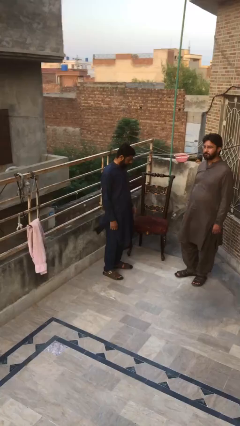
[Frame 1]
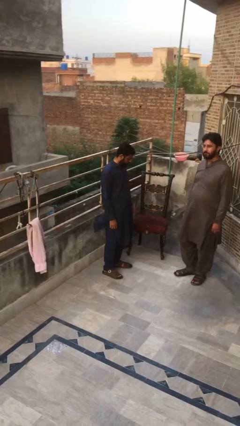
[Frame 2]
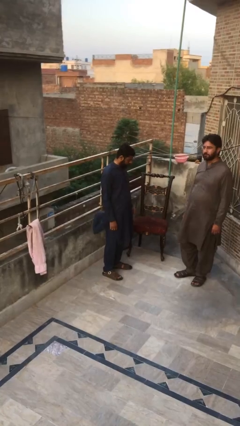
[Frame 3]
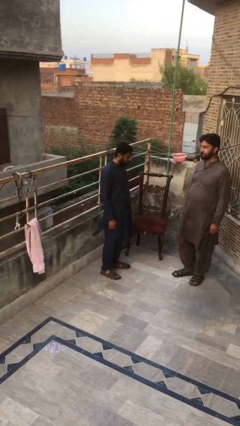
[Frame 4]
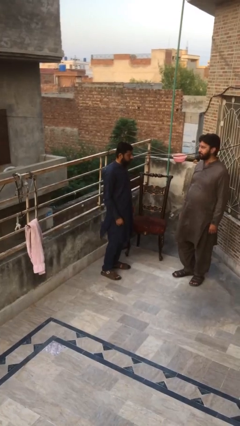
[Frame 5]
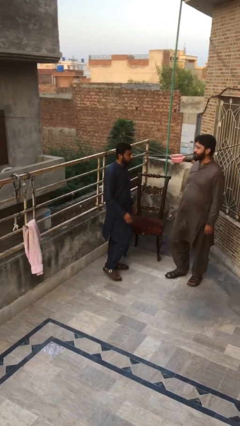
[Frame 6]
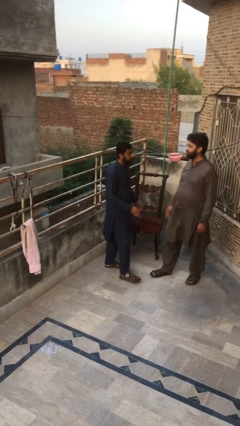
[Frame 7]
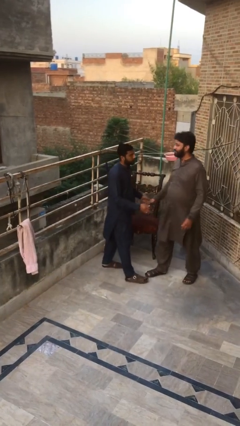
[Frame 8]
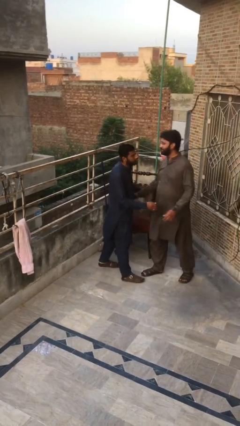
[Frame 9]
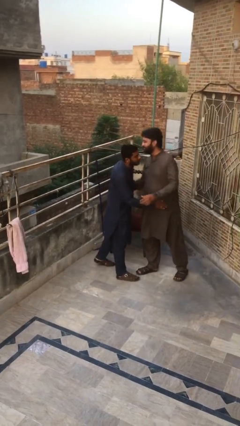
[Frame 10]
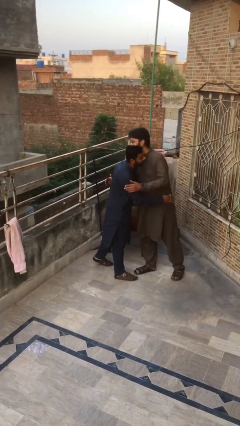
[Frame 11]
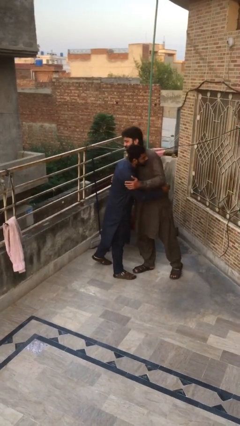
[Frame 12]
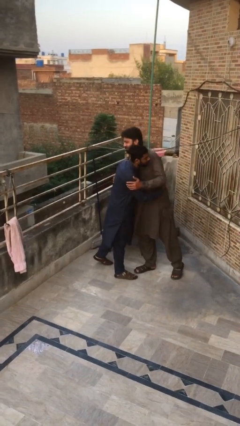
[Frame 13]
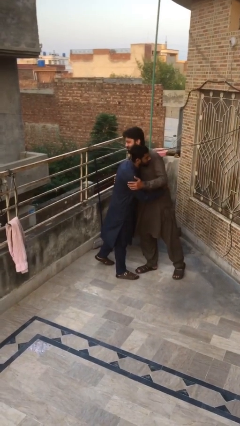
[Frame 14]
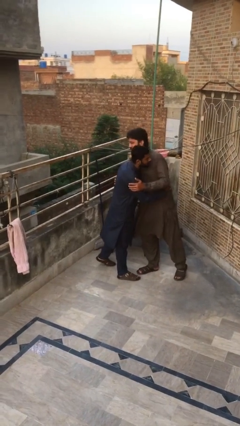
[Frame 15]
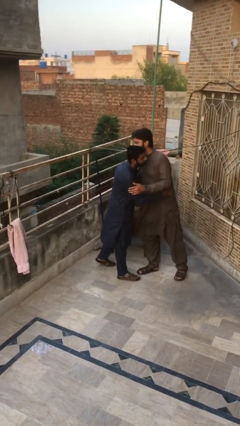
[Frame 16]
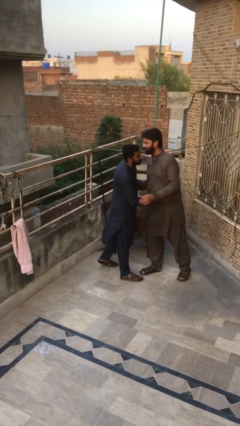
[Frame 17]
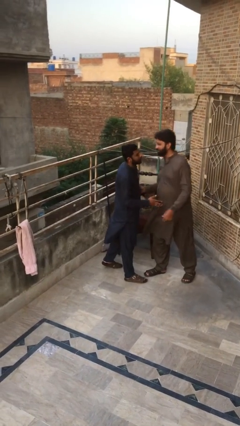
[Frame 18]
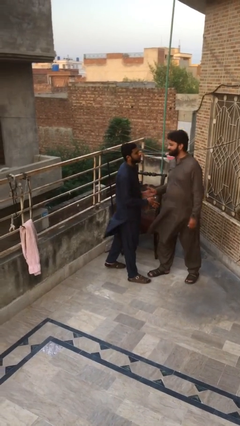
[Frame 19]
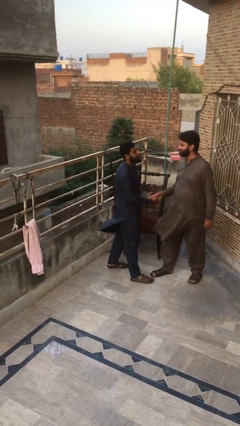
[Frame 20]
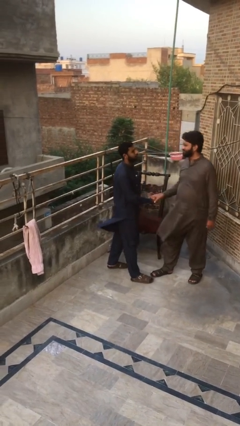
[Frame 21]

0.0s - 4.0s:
person embraces person

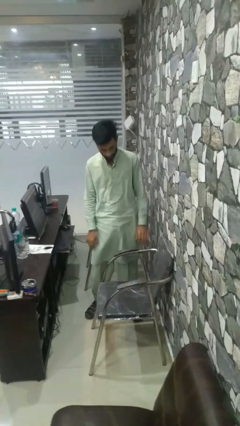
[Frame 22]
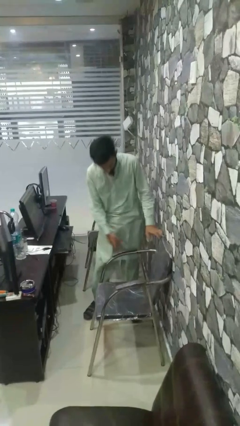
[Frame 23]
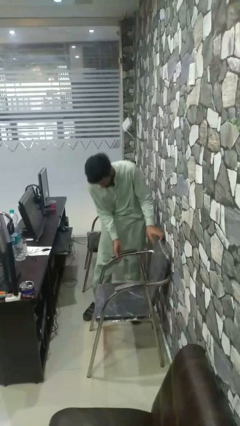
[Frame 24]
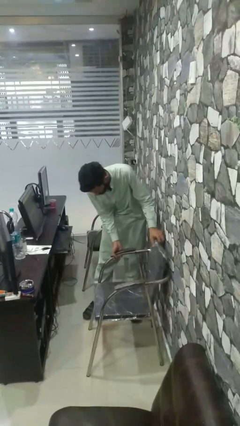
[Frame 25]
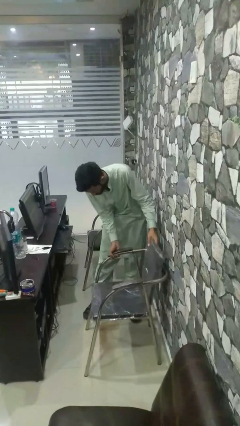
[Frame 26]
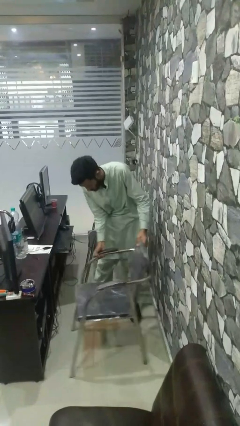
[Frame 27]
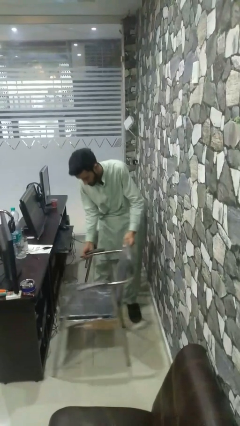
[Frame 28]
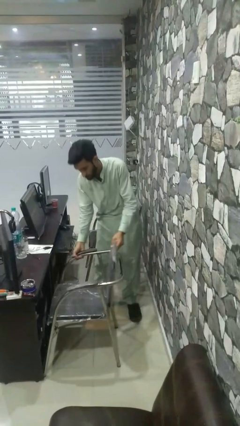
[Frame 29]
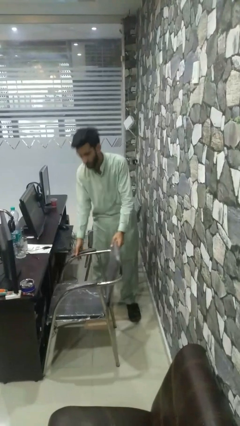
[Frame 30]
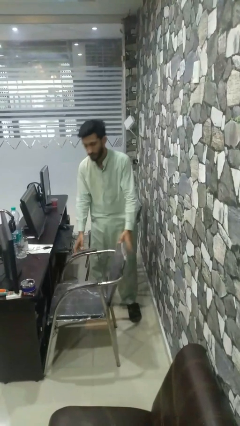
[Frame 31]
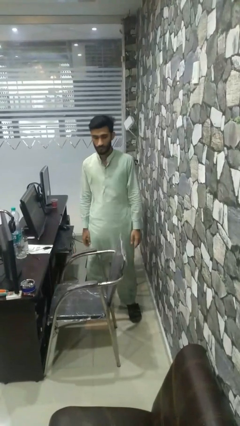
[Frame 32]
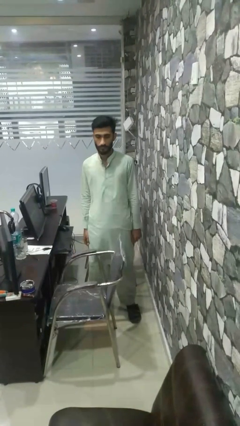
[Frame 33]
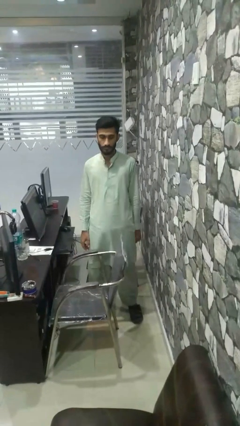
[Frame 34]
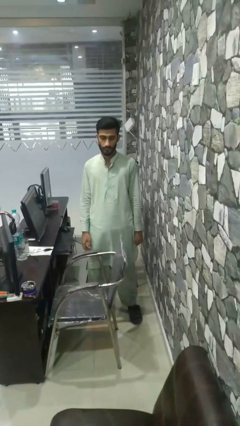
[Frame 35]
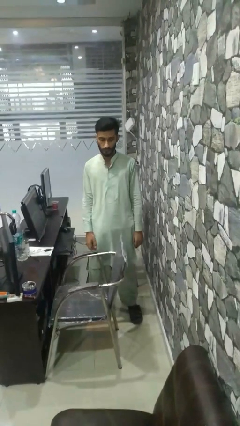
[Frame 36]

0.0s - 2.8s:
person pushes in chair

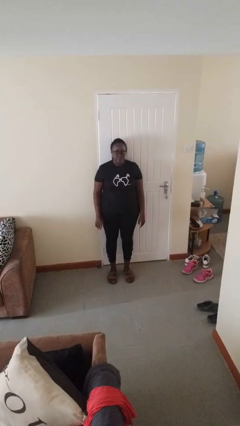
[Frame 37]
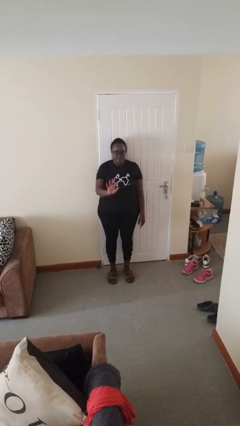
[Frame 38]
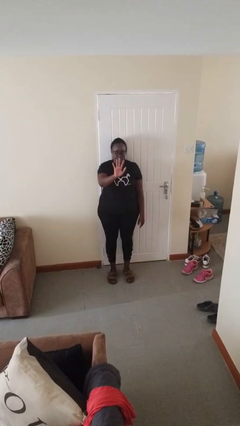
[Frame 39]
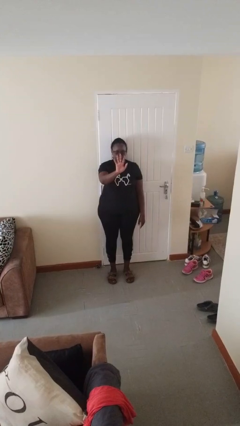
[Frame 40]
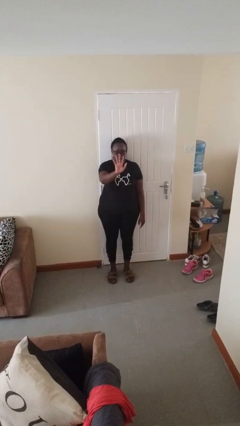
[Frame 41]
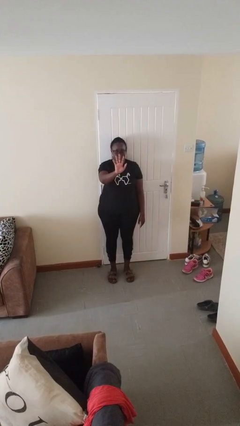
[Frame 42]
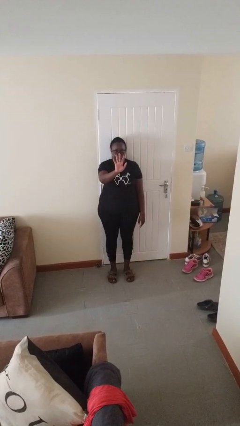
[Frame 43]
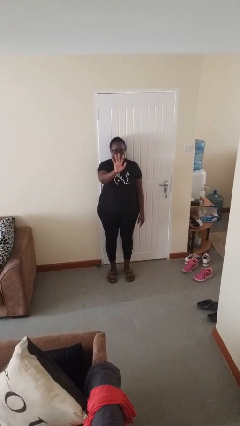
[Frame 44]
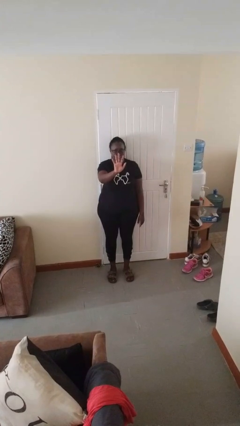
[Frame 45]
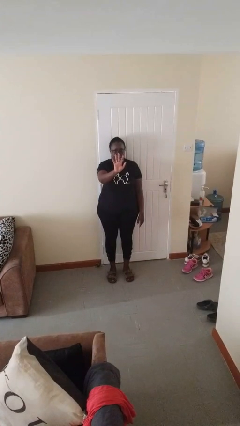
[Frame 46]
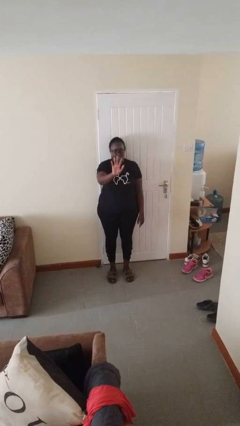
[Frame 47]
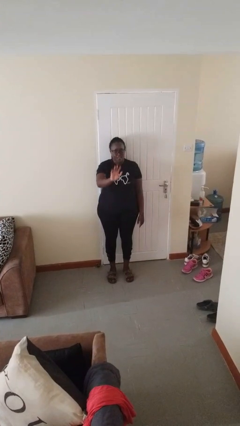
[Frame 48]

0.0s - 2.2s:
person gestures number five

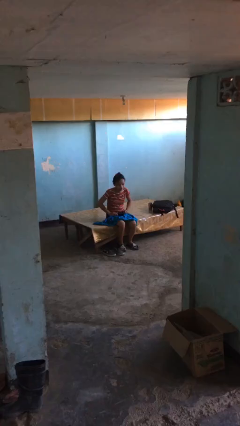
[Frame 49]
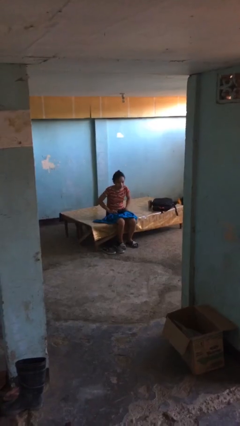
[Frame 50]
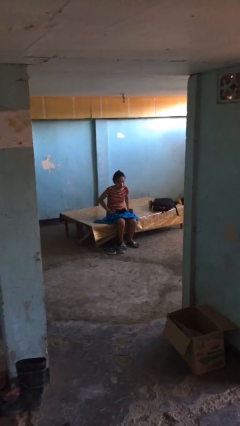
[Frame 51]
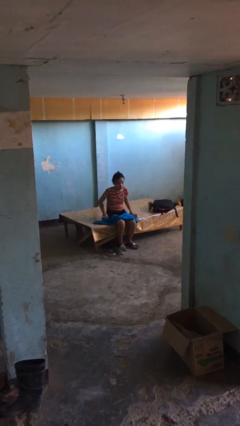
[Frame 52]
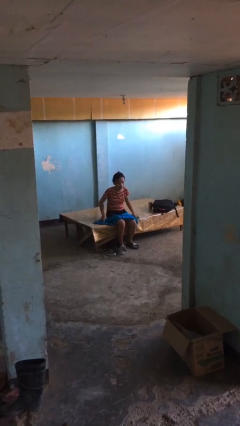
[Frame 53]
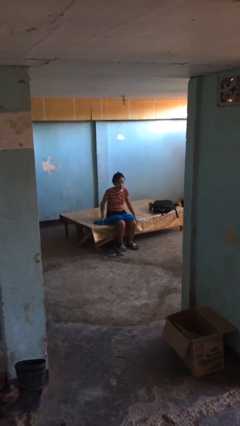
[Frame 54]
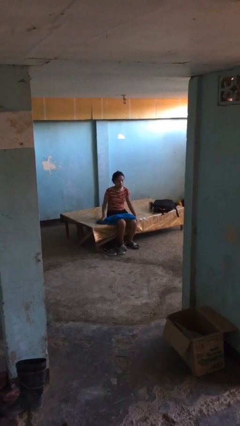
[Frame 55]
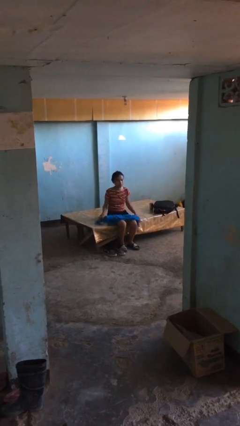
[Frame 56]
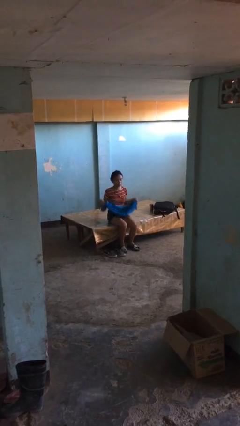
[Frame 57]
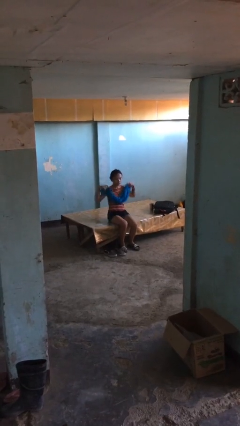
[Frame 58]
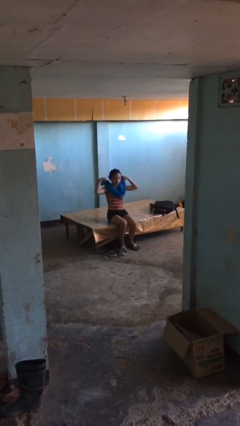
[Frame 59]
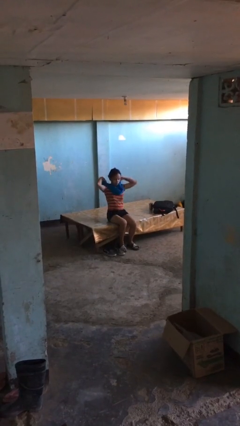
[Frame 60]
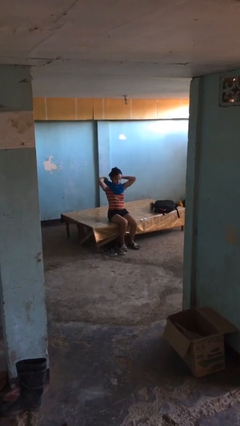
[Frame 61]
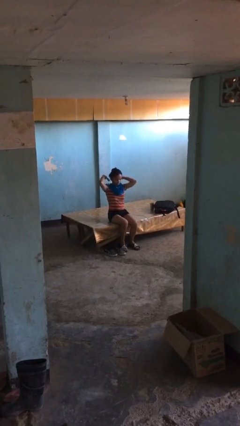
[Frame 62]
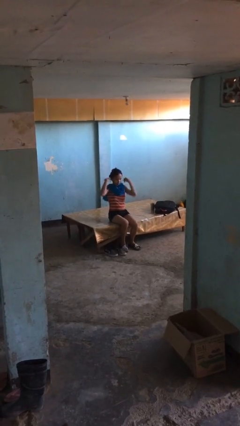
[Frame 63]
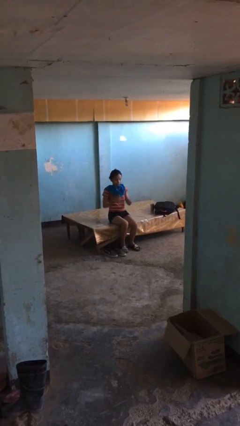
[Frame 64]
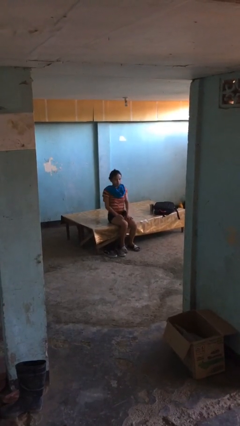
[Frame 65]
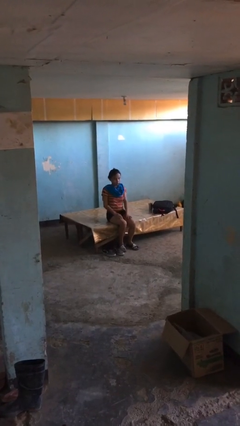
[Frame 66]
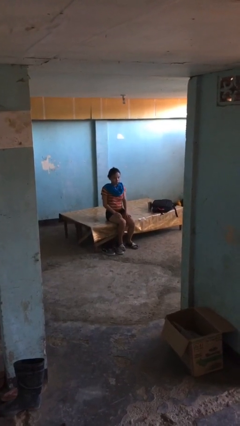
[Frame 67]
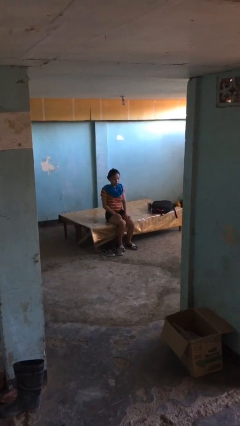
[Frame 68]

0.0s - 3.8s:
person puts on scarf

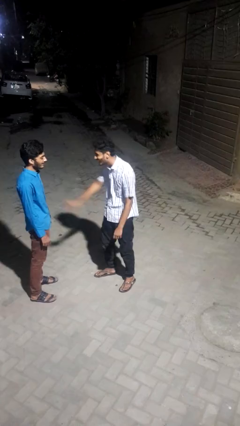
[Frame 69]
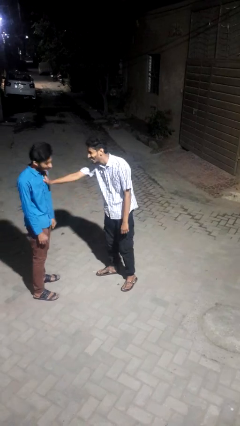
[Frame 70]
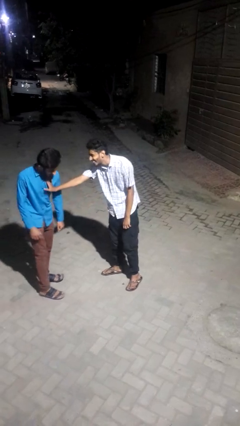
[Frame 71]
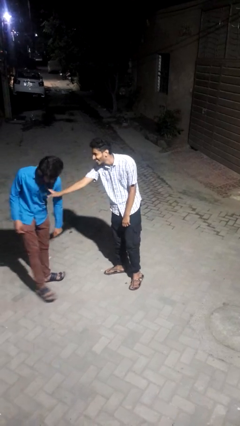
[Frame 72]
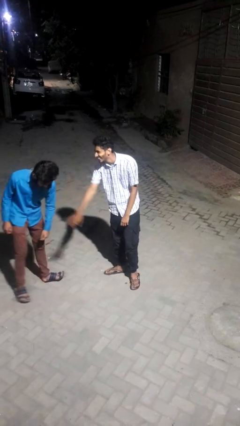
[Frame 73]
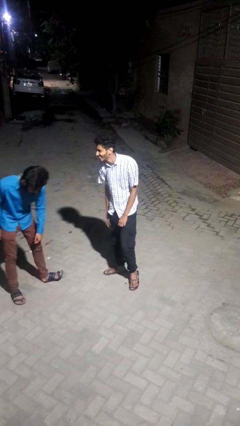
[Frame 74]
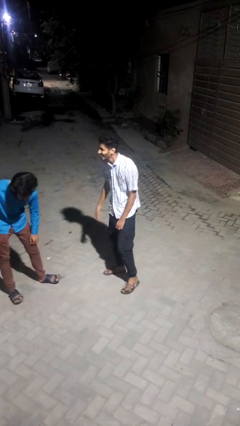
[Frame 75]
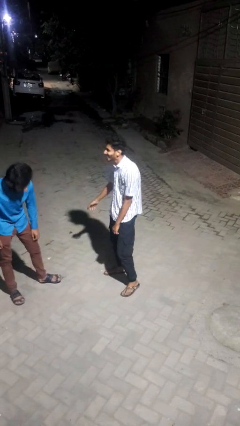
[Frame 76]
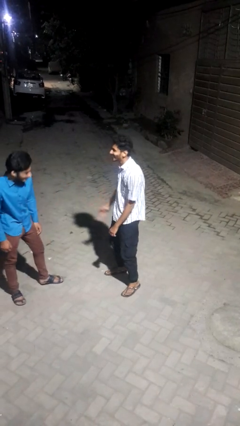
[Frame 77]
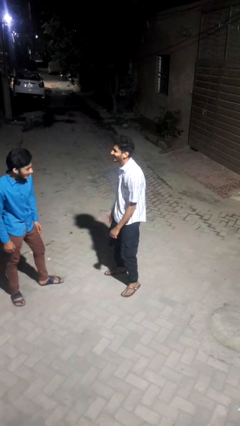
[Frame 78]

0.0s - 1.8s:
person shoves person

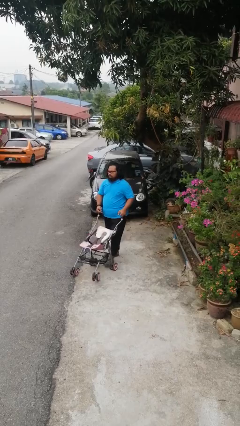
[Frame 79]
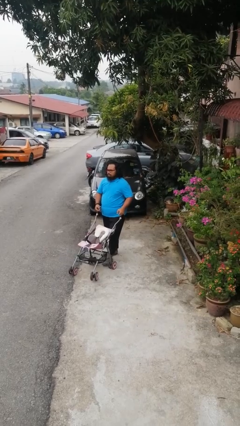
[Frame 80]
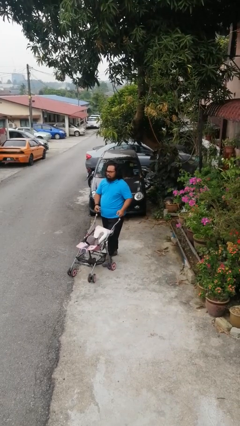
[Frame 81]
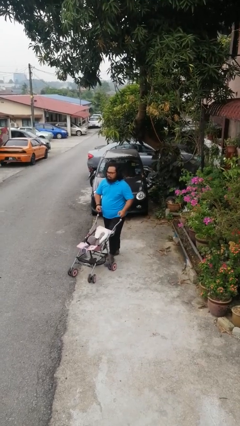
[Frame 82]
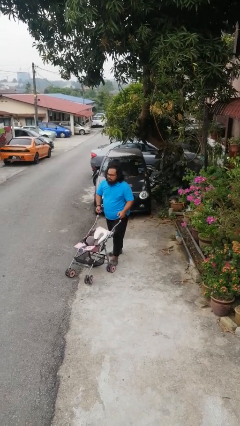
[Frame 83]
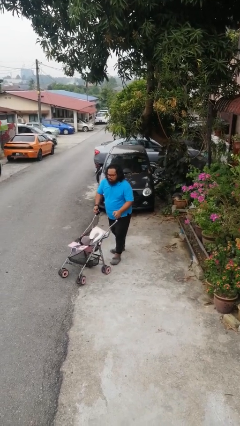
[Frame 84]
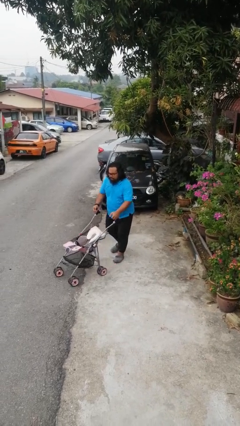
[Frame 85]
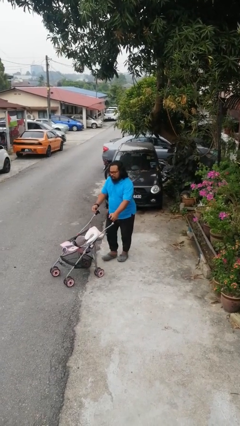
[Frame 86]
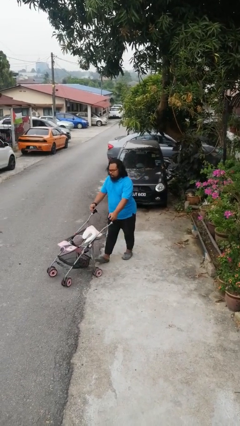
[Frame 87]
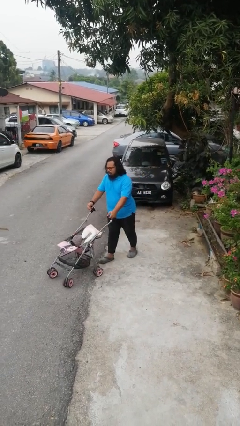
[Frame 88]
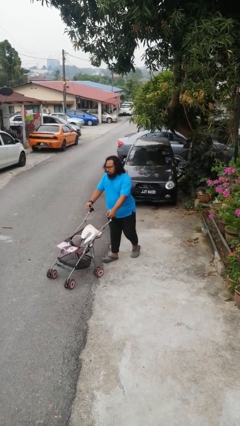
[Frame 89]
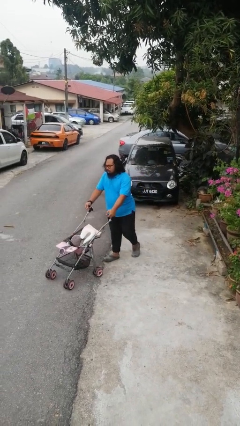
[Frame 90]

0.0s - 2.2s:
person pushes wheeled cart

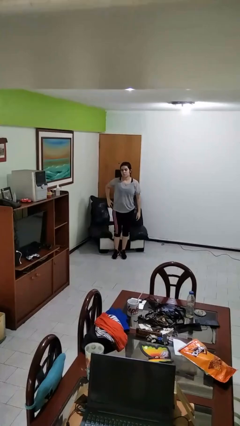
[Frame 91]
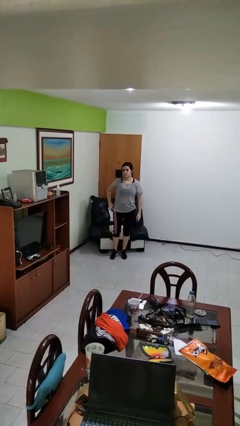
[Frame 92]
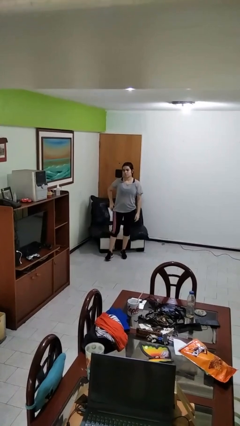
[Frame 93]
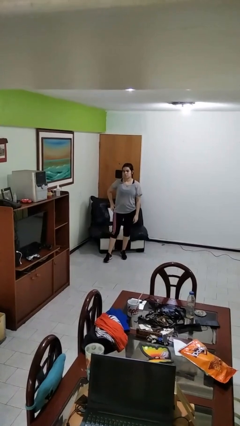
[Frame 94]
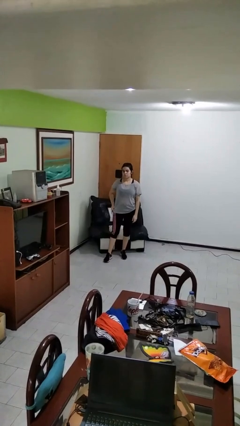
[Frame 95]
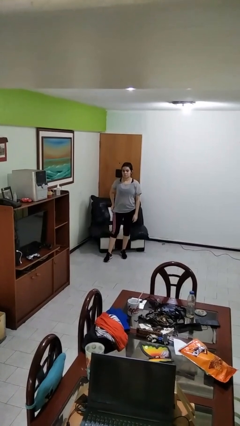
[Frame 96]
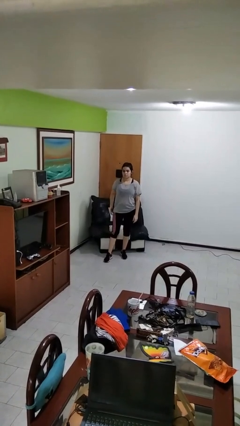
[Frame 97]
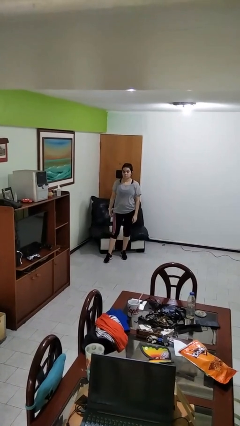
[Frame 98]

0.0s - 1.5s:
person puts phone into pocket
